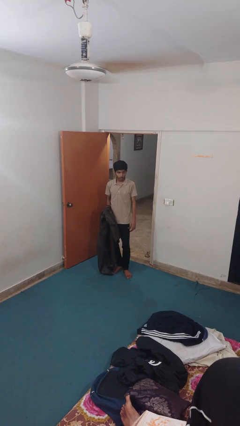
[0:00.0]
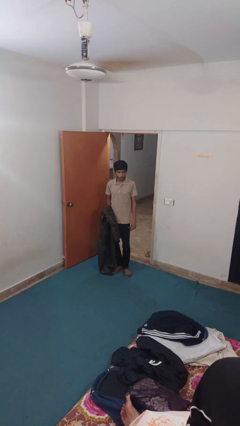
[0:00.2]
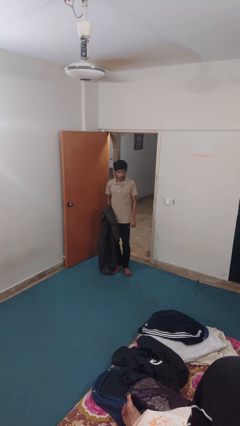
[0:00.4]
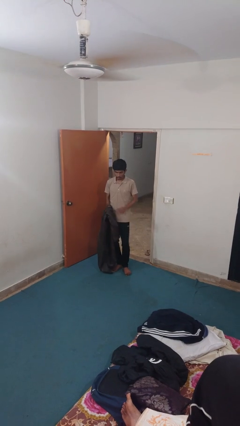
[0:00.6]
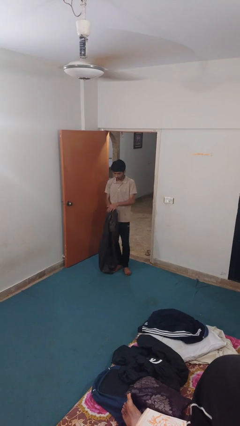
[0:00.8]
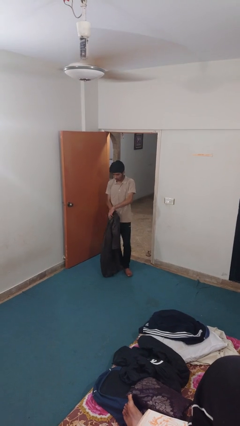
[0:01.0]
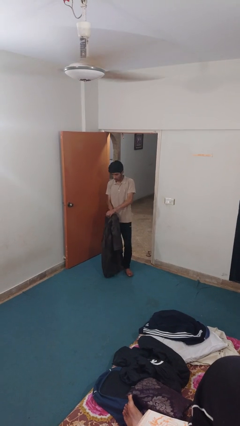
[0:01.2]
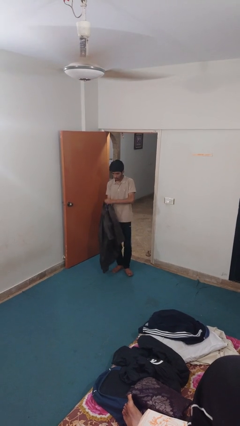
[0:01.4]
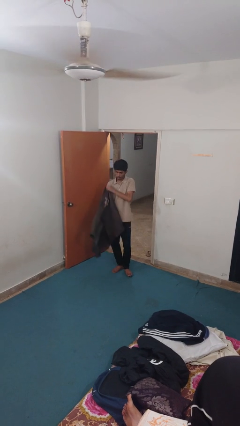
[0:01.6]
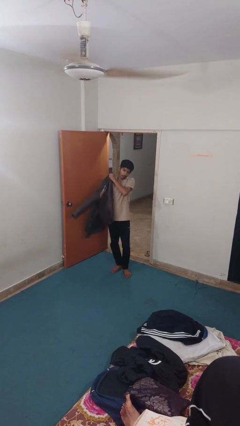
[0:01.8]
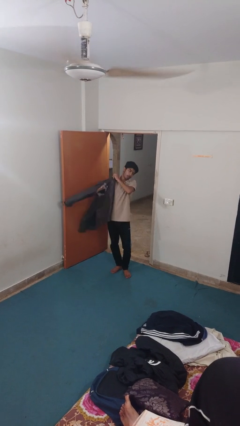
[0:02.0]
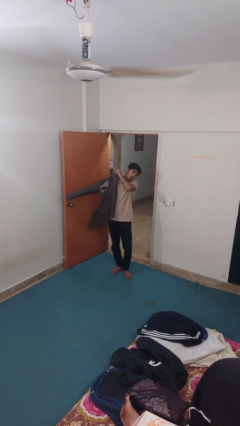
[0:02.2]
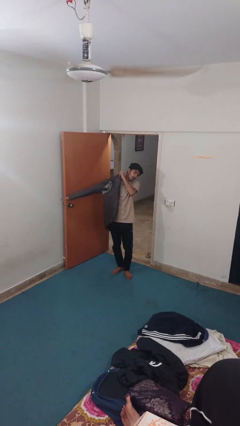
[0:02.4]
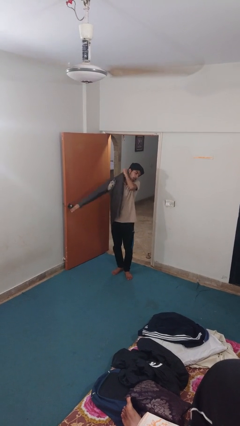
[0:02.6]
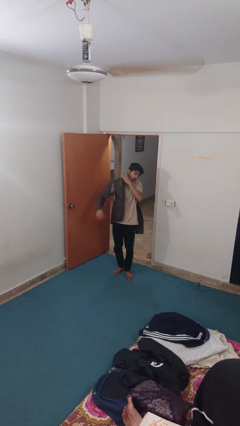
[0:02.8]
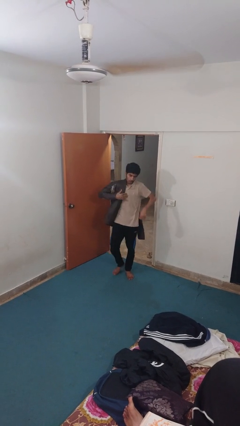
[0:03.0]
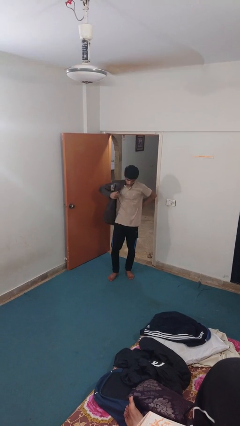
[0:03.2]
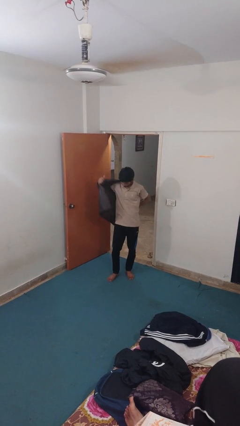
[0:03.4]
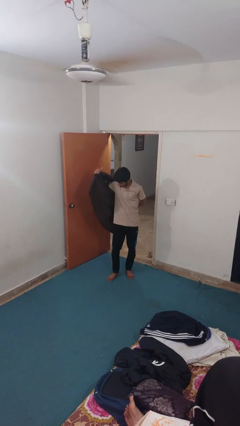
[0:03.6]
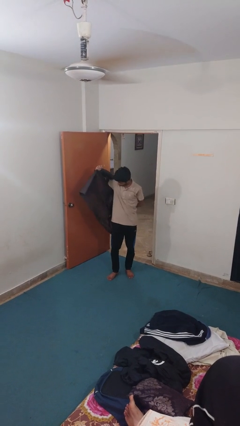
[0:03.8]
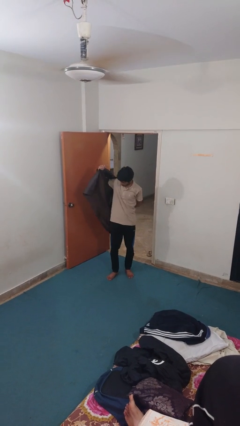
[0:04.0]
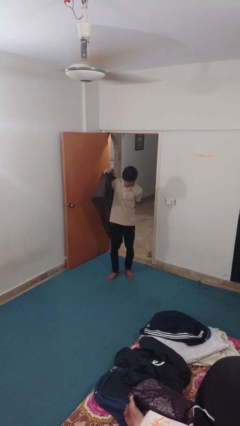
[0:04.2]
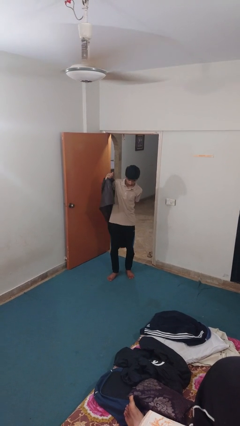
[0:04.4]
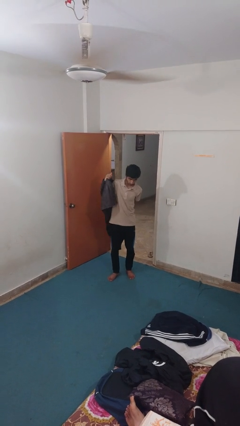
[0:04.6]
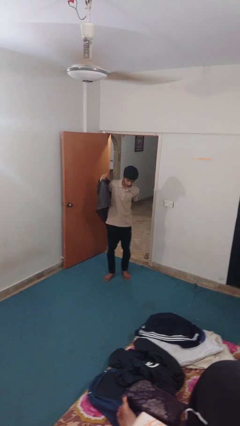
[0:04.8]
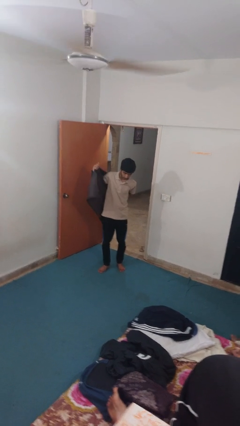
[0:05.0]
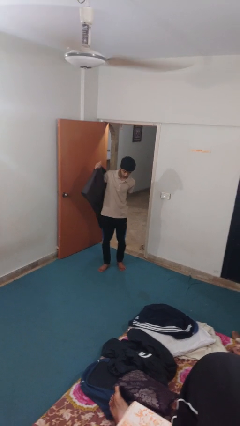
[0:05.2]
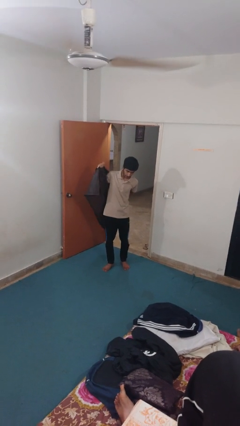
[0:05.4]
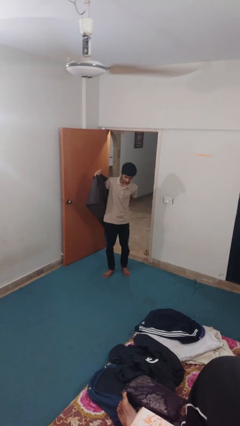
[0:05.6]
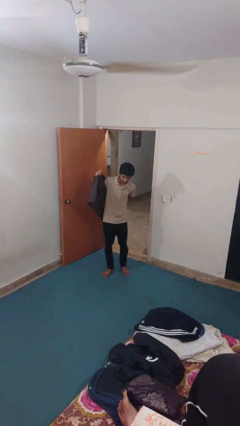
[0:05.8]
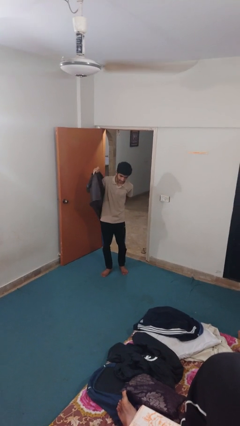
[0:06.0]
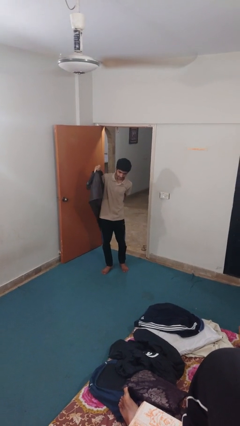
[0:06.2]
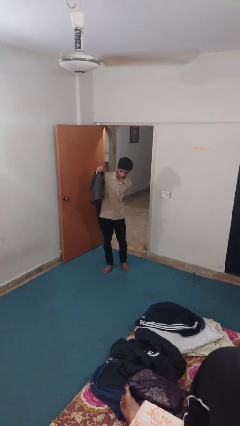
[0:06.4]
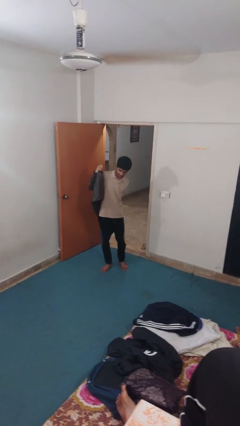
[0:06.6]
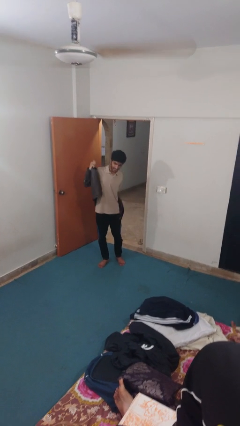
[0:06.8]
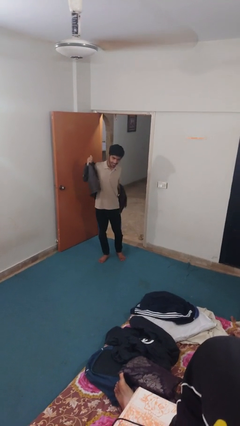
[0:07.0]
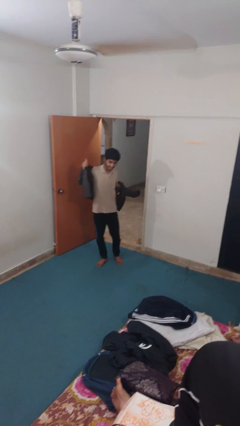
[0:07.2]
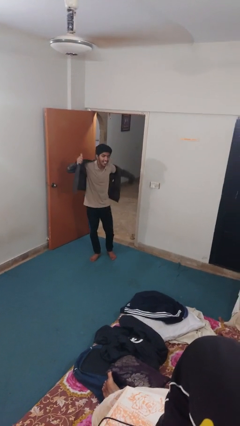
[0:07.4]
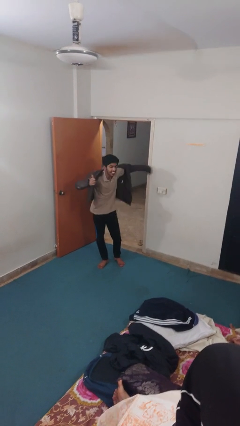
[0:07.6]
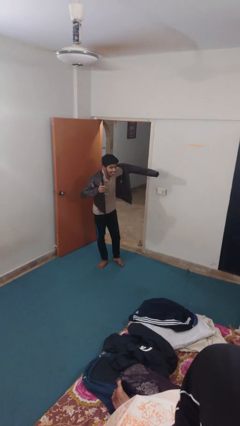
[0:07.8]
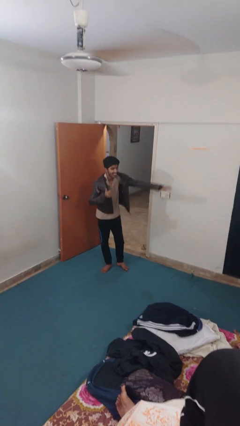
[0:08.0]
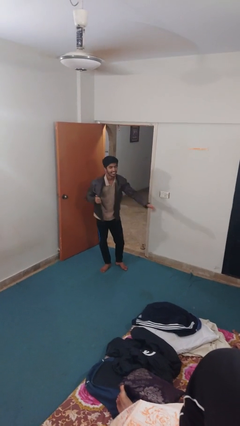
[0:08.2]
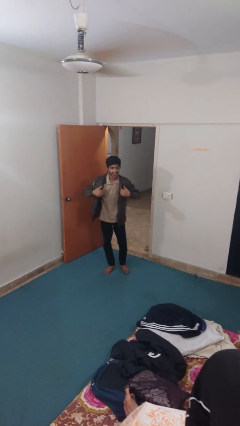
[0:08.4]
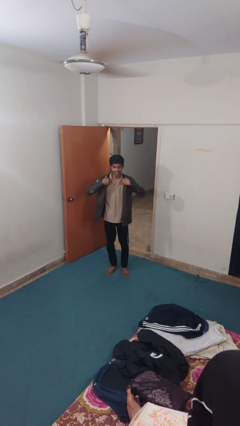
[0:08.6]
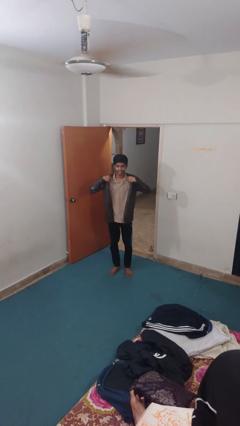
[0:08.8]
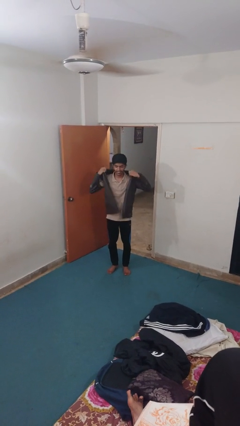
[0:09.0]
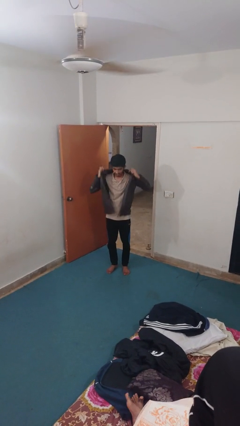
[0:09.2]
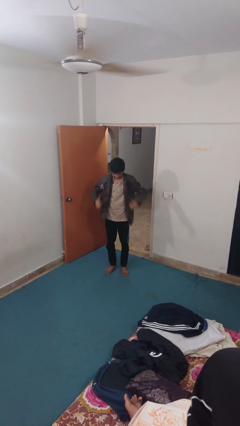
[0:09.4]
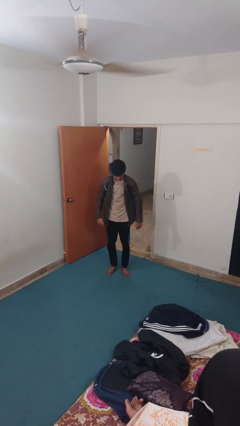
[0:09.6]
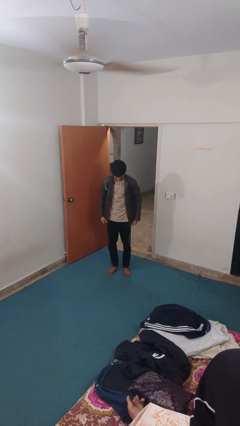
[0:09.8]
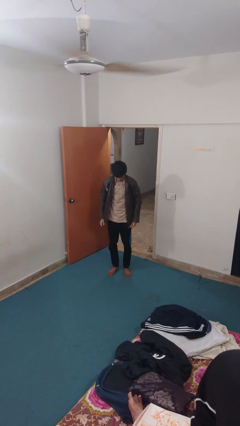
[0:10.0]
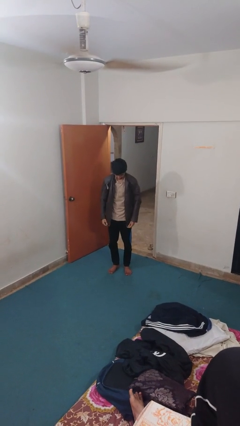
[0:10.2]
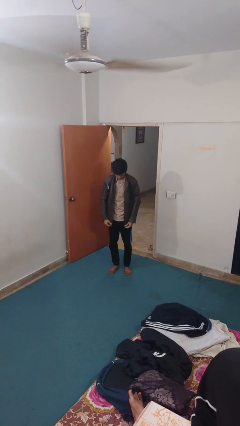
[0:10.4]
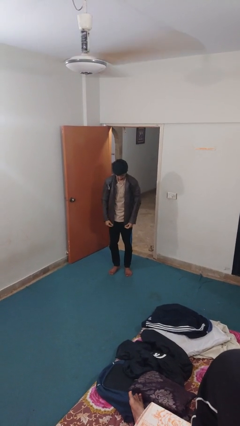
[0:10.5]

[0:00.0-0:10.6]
person puts on jacket

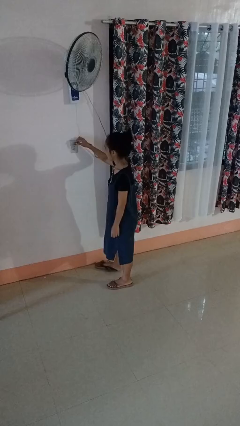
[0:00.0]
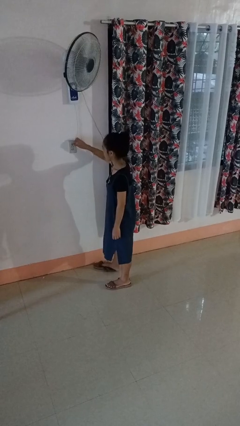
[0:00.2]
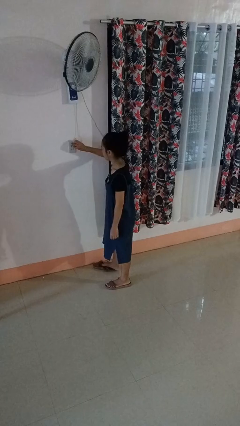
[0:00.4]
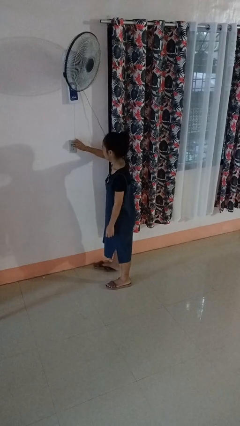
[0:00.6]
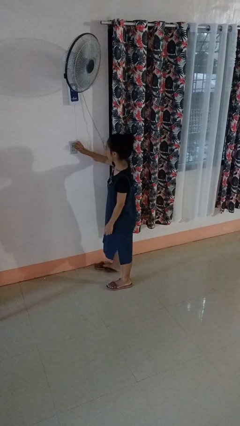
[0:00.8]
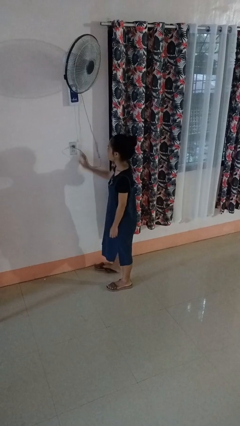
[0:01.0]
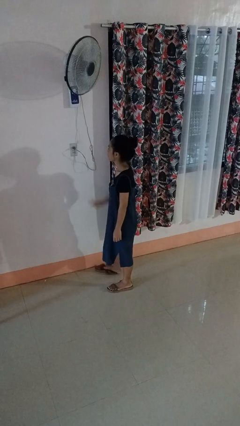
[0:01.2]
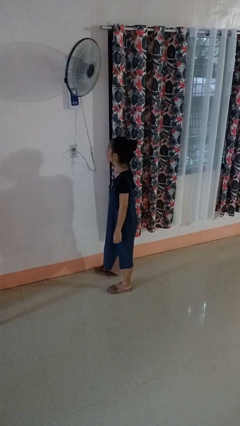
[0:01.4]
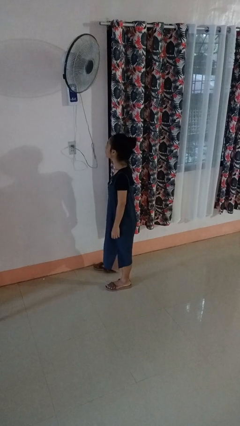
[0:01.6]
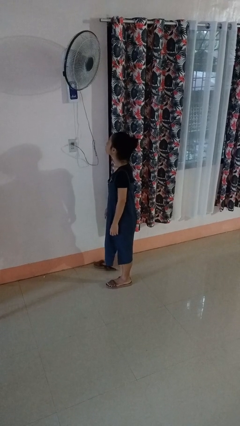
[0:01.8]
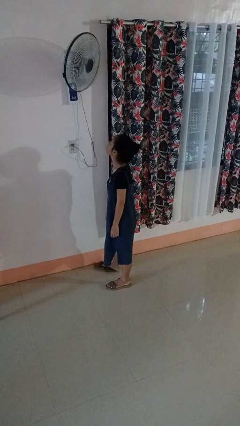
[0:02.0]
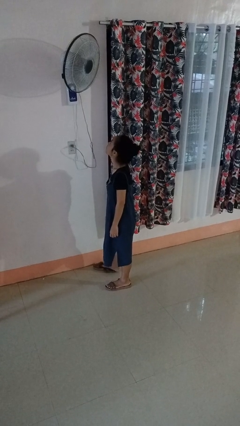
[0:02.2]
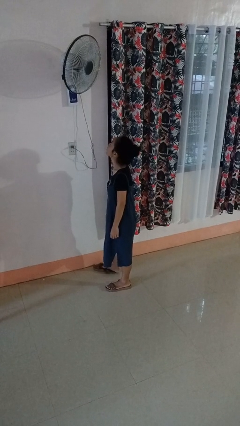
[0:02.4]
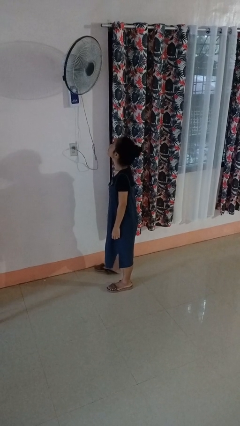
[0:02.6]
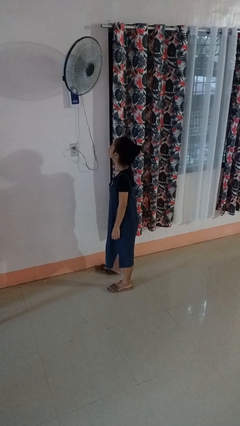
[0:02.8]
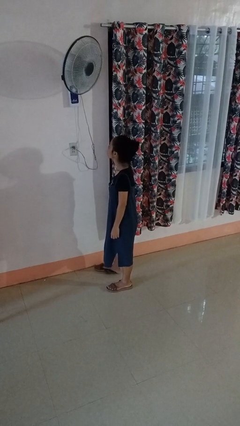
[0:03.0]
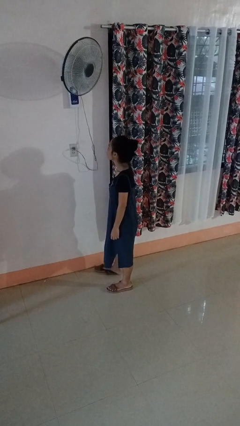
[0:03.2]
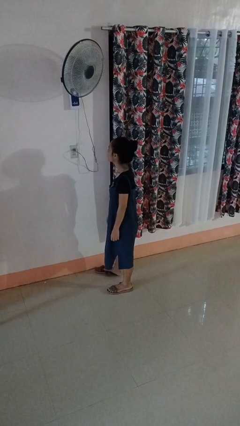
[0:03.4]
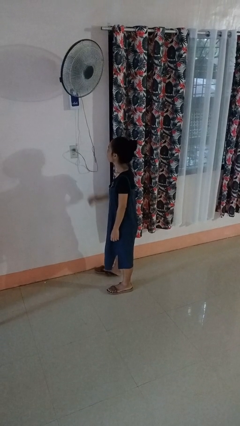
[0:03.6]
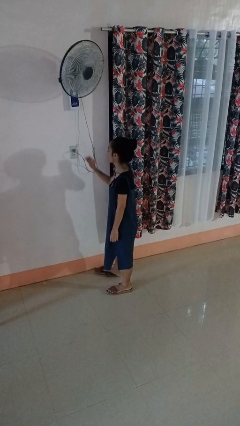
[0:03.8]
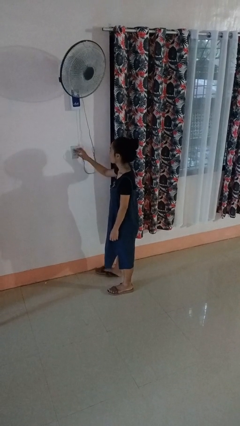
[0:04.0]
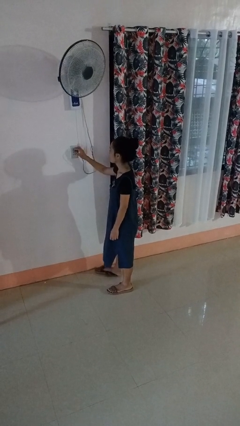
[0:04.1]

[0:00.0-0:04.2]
person plugs into electrical socket

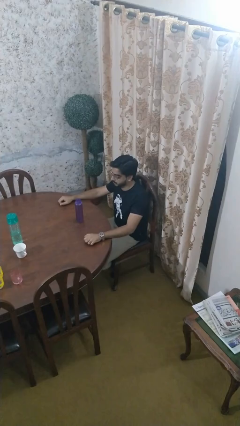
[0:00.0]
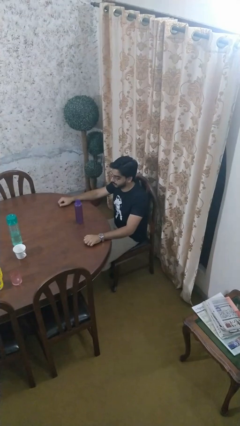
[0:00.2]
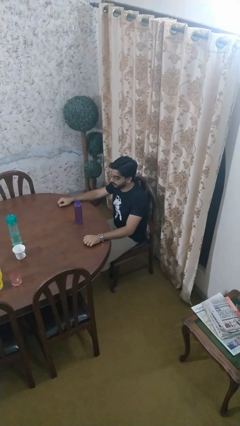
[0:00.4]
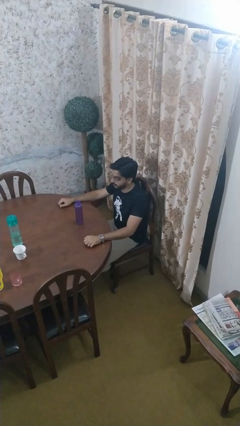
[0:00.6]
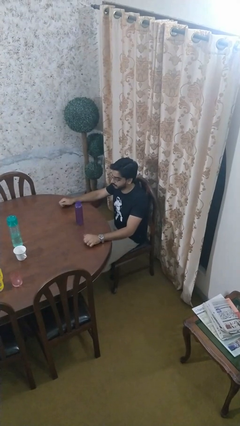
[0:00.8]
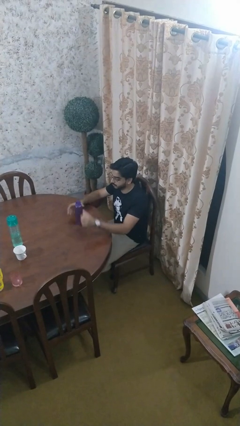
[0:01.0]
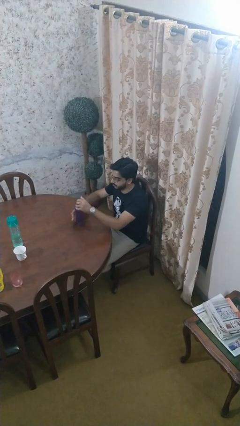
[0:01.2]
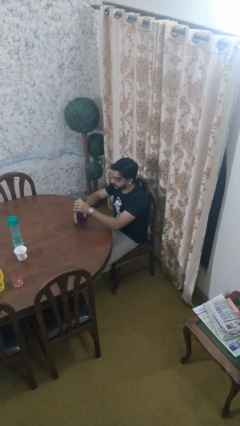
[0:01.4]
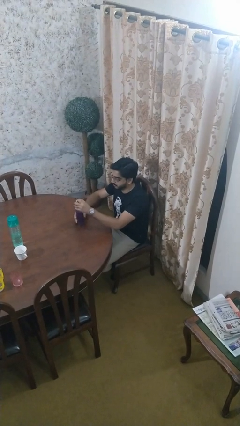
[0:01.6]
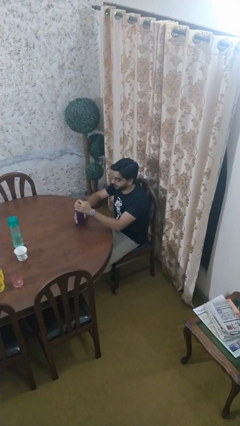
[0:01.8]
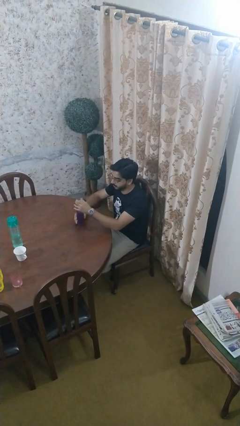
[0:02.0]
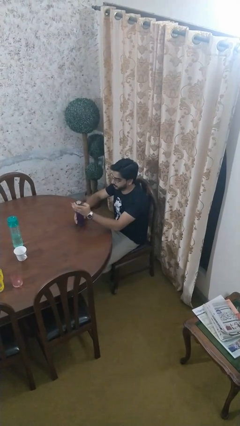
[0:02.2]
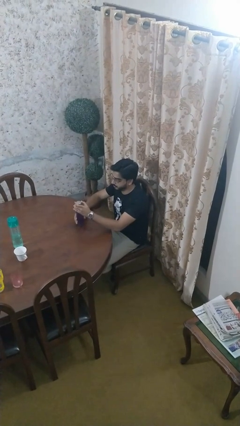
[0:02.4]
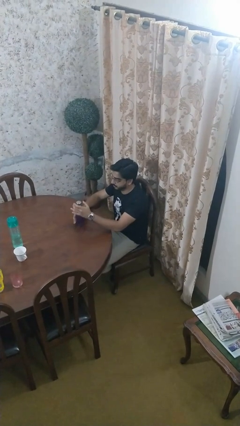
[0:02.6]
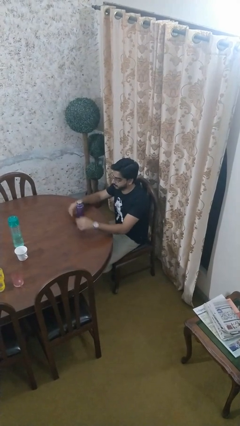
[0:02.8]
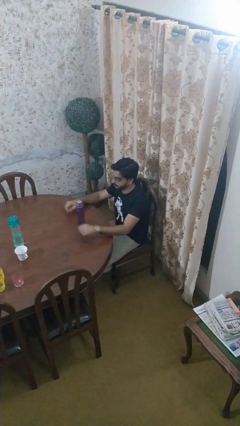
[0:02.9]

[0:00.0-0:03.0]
person screws lid to bottle

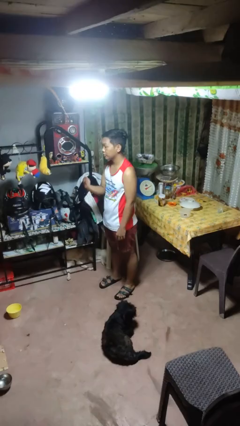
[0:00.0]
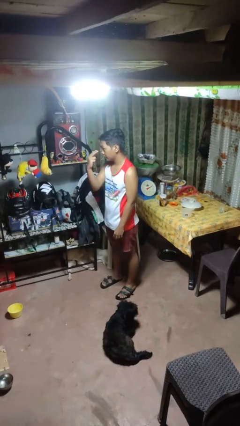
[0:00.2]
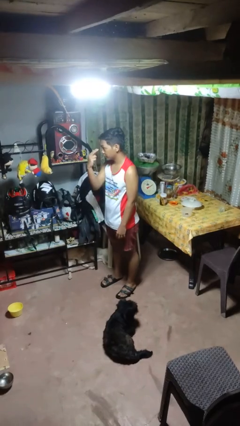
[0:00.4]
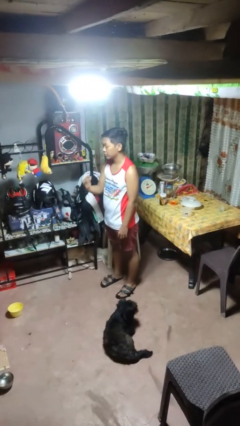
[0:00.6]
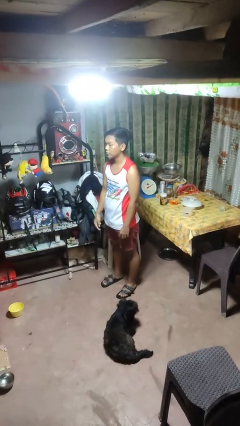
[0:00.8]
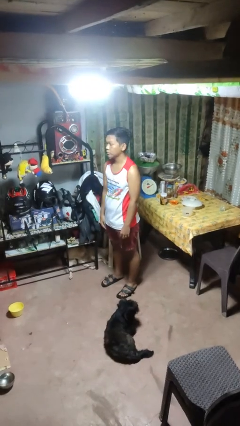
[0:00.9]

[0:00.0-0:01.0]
person gestures watch closely
